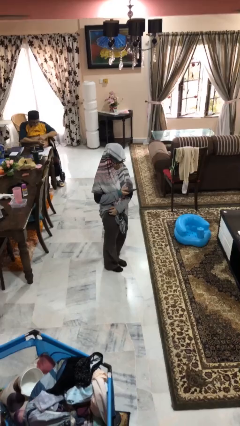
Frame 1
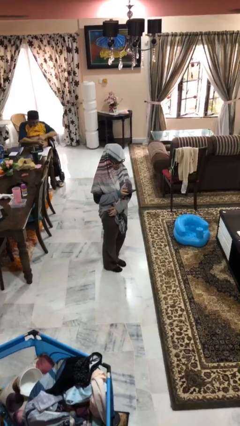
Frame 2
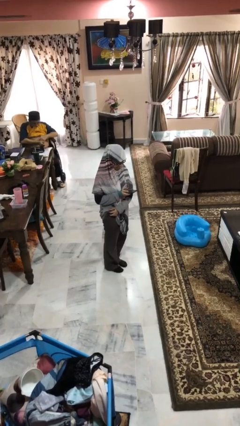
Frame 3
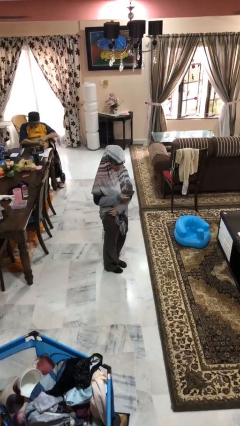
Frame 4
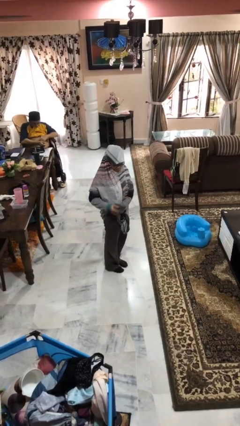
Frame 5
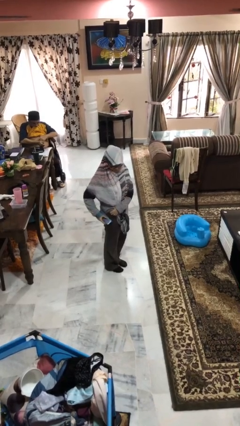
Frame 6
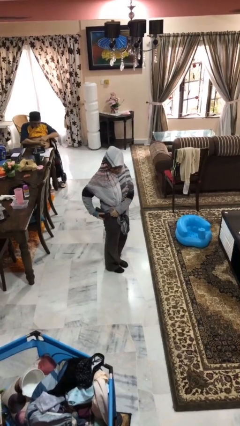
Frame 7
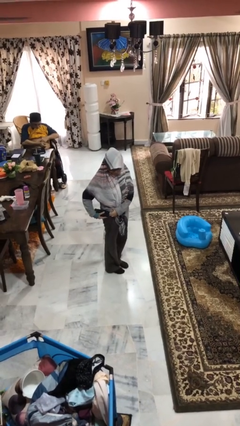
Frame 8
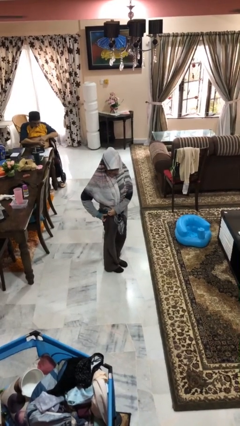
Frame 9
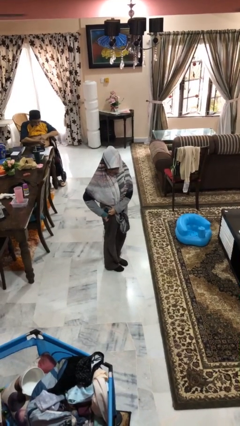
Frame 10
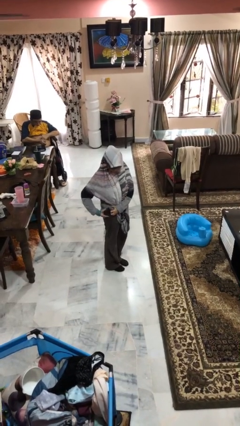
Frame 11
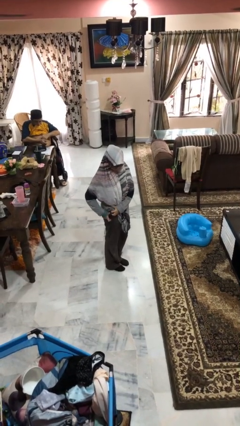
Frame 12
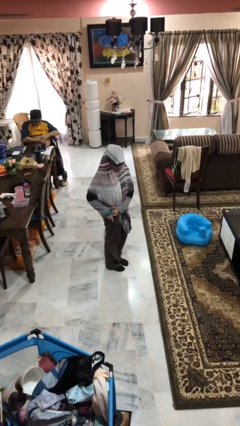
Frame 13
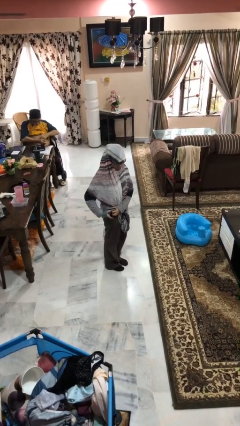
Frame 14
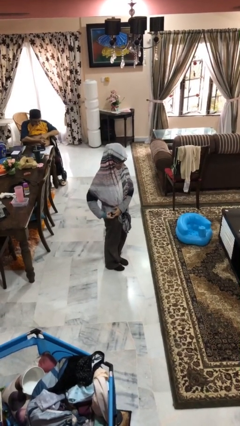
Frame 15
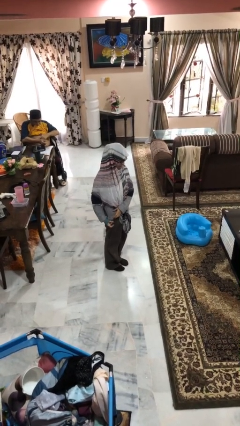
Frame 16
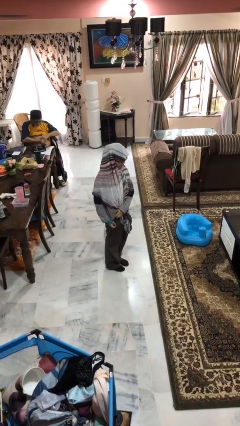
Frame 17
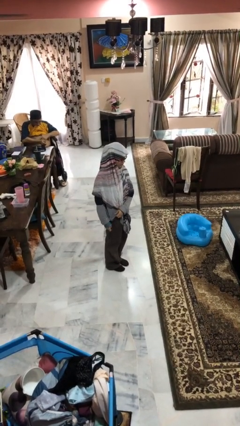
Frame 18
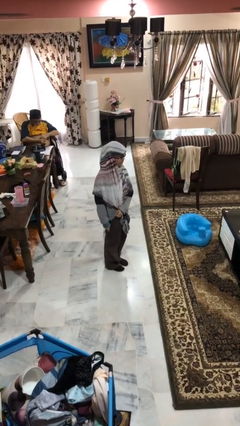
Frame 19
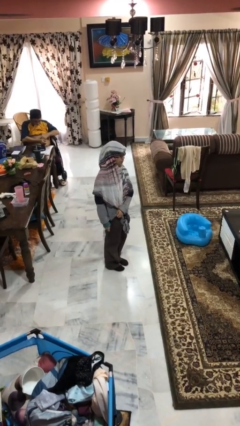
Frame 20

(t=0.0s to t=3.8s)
person puts phone into pocket

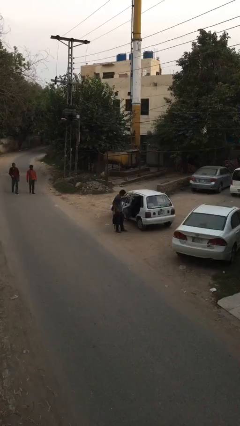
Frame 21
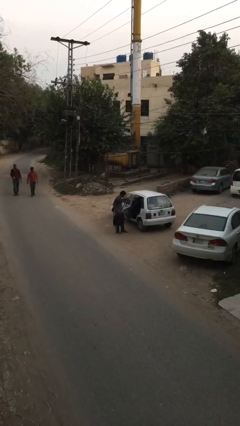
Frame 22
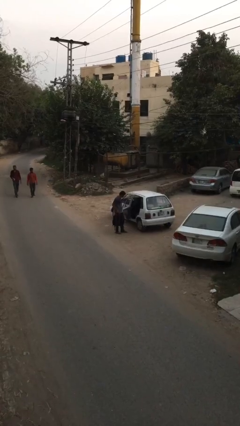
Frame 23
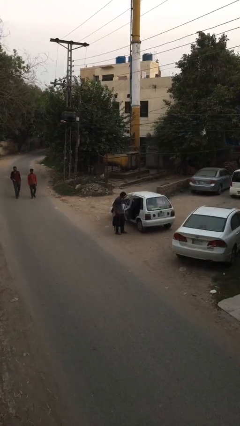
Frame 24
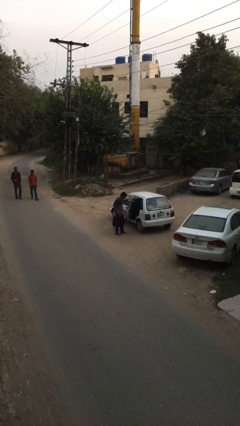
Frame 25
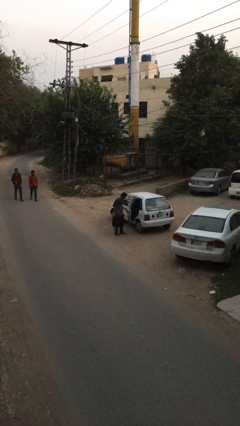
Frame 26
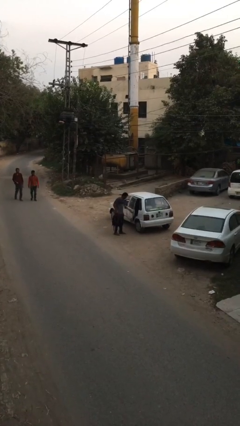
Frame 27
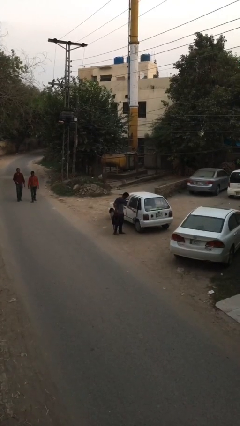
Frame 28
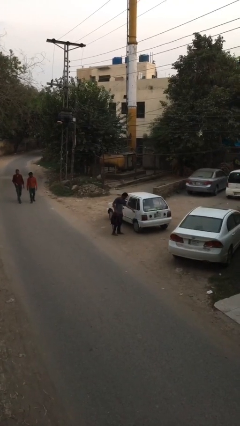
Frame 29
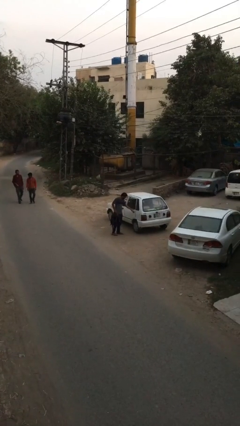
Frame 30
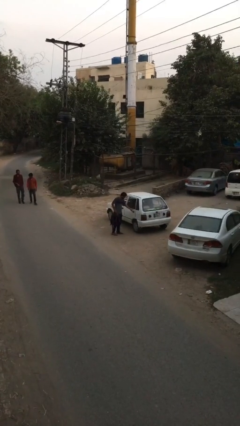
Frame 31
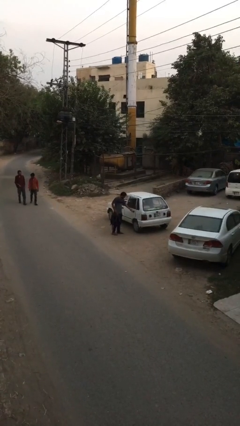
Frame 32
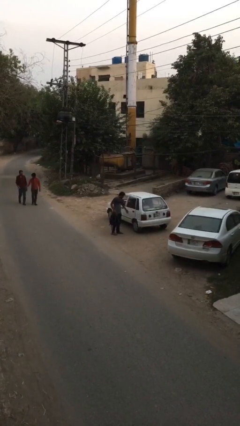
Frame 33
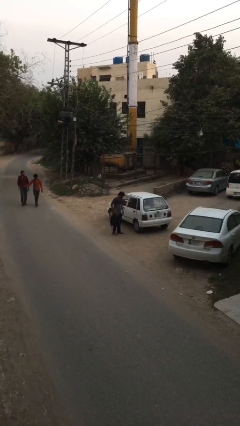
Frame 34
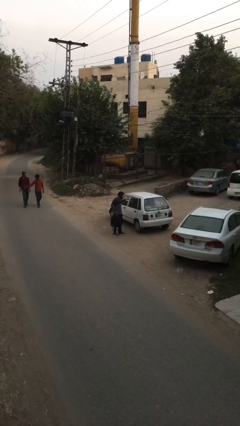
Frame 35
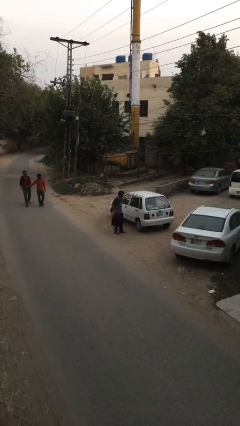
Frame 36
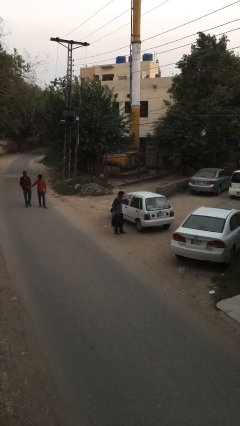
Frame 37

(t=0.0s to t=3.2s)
person closes car door

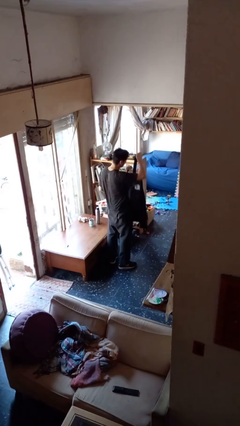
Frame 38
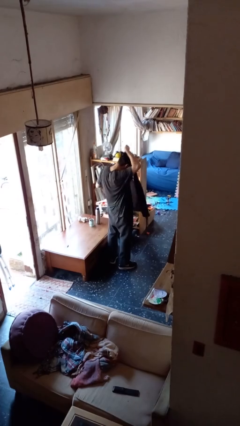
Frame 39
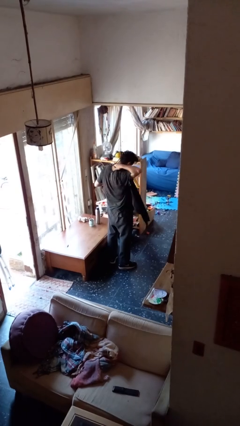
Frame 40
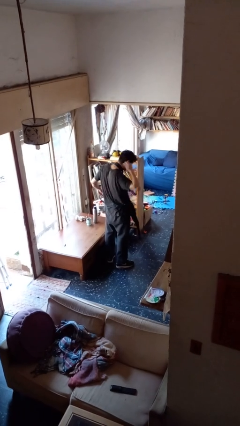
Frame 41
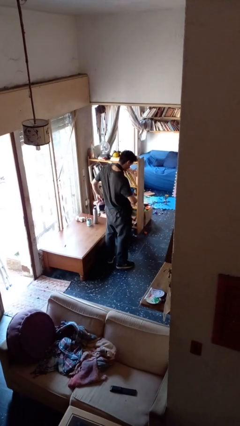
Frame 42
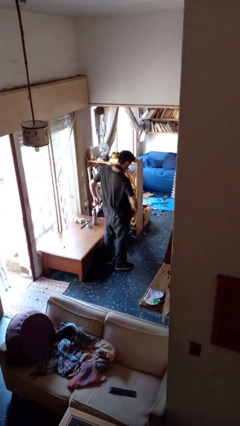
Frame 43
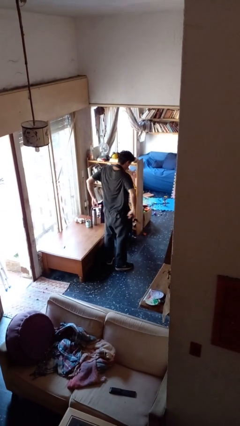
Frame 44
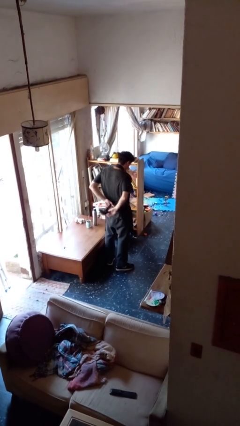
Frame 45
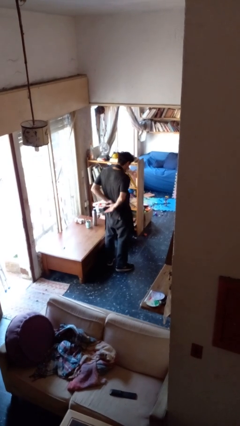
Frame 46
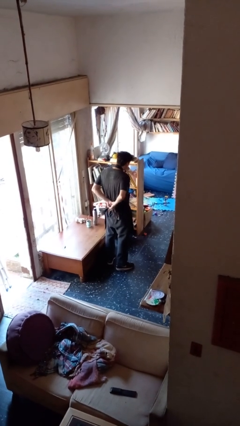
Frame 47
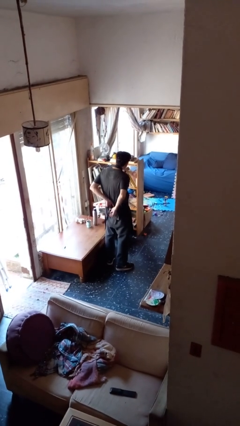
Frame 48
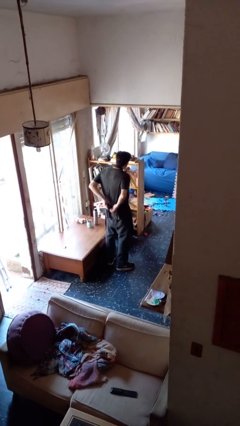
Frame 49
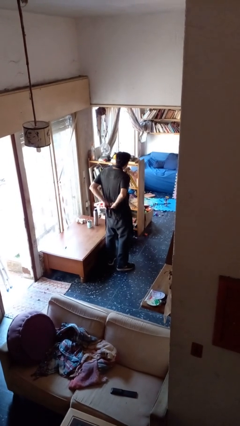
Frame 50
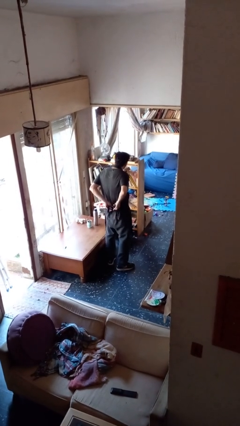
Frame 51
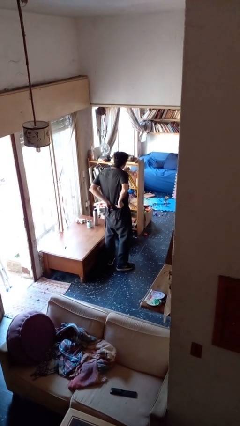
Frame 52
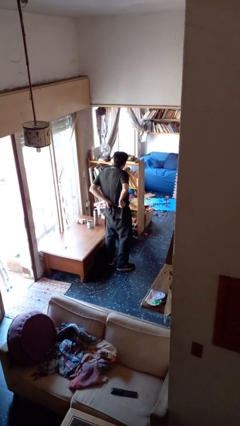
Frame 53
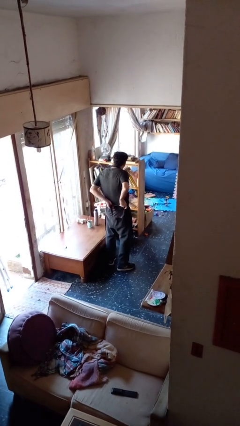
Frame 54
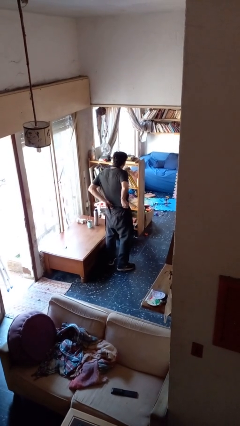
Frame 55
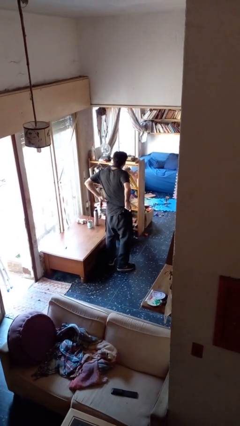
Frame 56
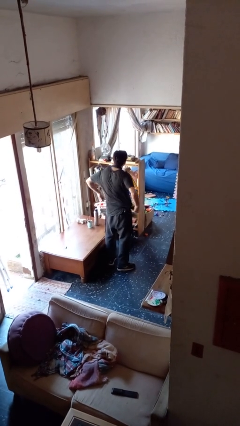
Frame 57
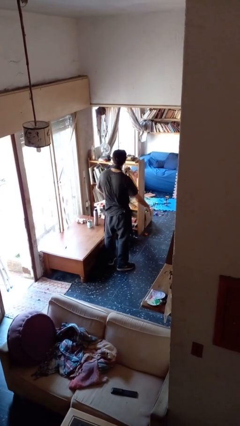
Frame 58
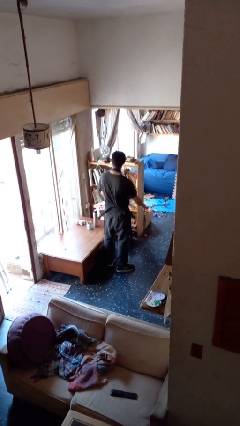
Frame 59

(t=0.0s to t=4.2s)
person puts on apron

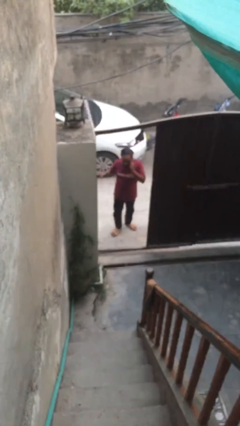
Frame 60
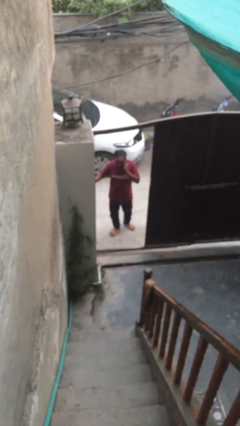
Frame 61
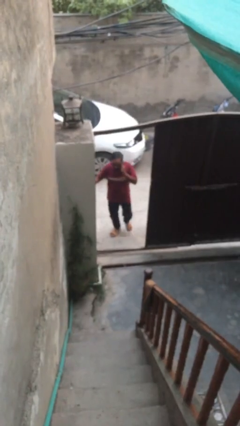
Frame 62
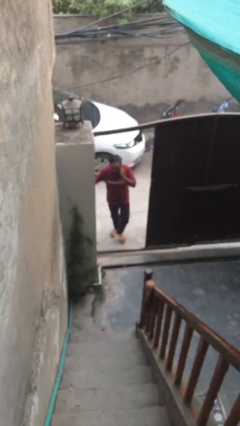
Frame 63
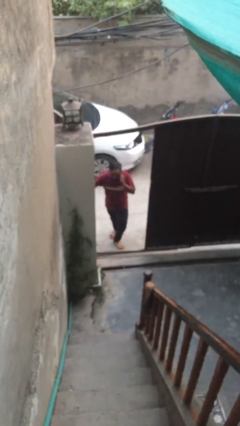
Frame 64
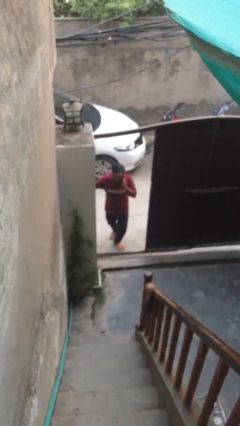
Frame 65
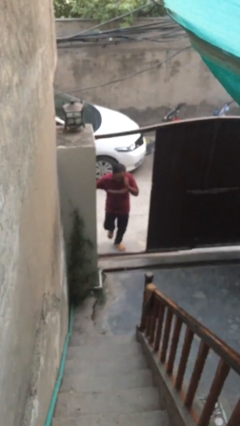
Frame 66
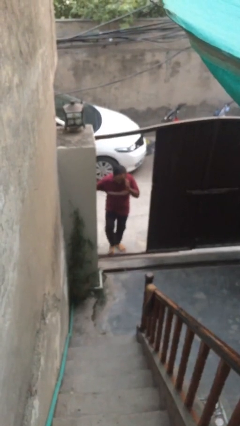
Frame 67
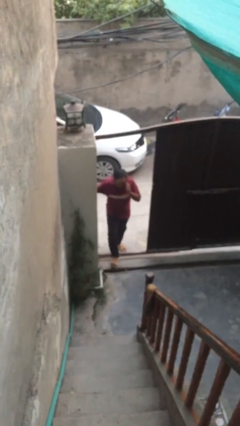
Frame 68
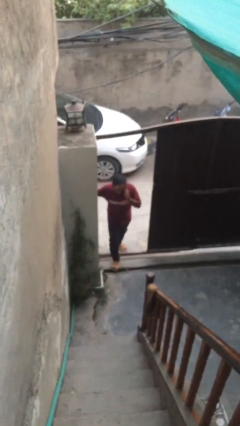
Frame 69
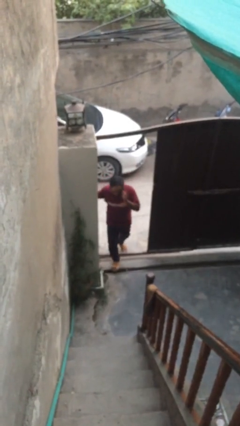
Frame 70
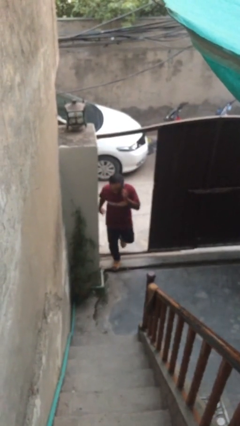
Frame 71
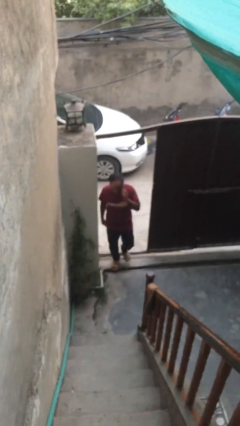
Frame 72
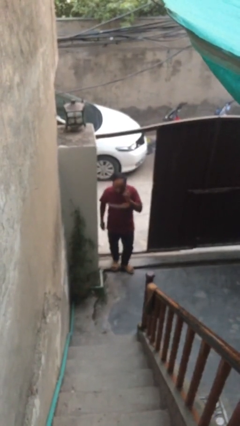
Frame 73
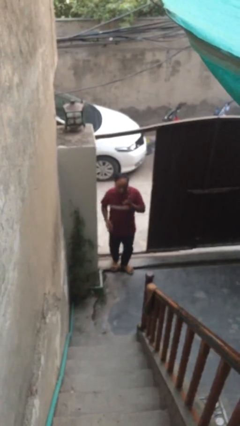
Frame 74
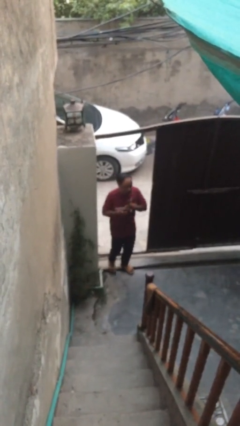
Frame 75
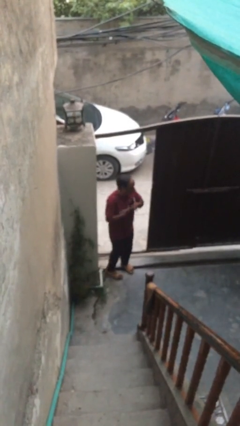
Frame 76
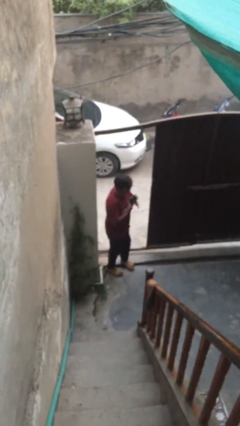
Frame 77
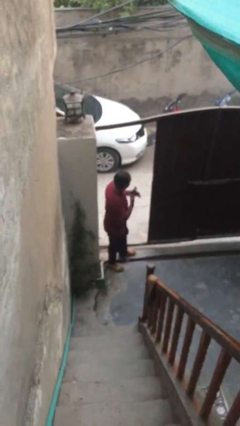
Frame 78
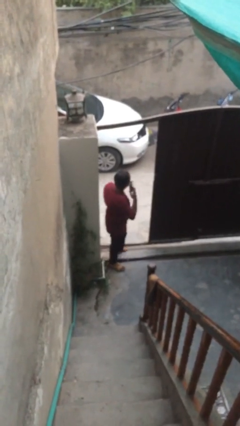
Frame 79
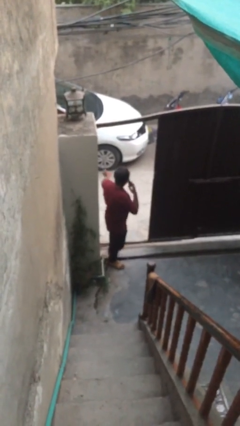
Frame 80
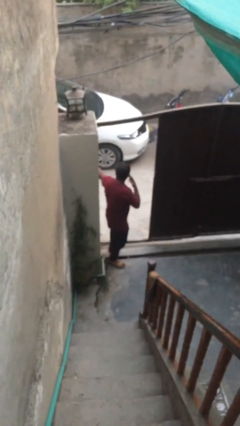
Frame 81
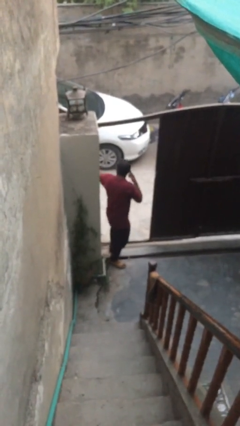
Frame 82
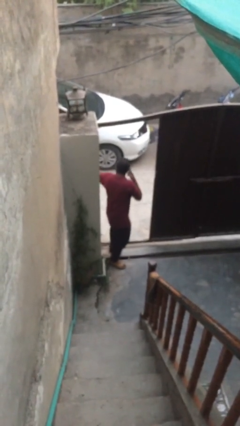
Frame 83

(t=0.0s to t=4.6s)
person enters scene through structure

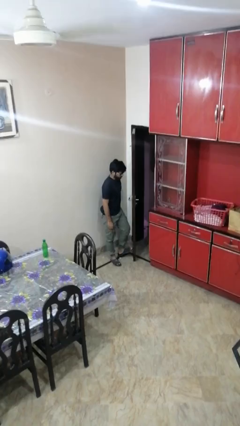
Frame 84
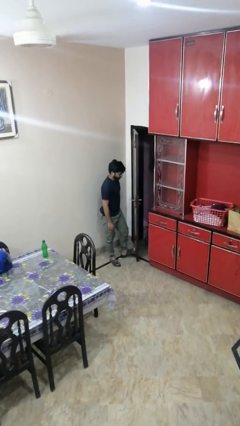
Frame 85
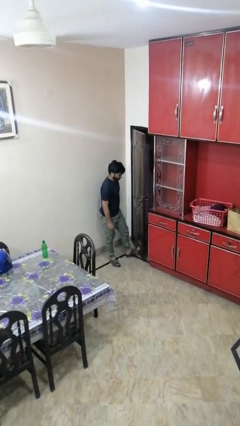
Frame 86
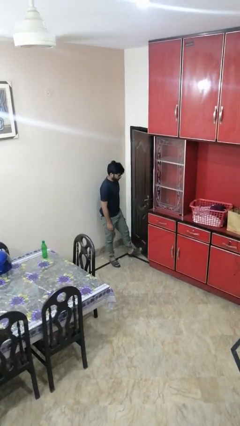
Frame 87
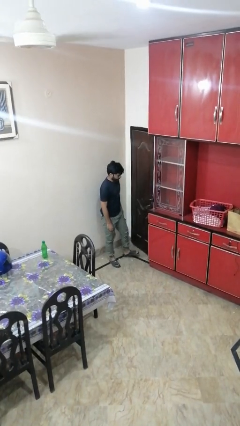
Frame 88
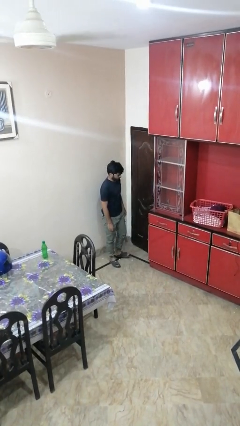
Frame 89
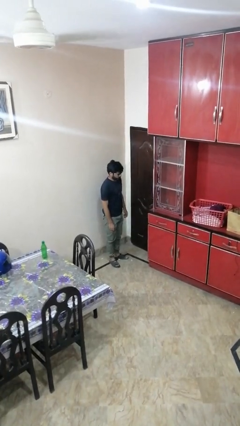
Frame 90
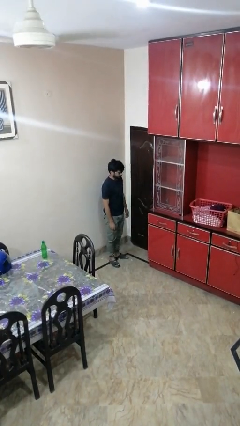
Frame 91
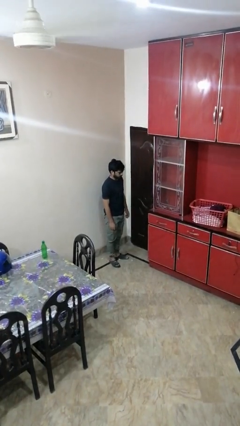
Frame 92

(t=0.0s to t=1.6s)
person closes door with foot

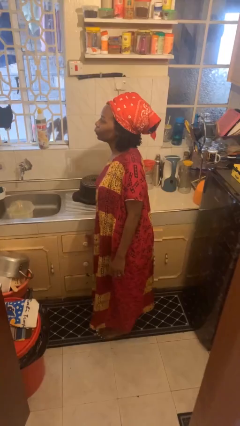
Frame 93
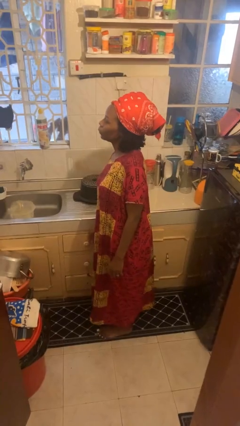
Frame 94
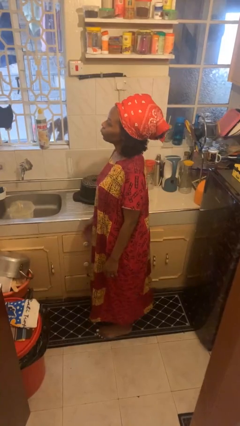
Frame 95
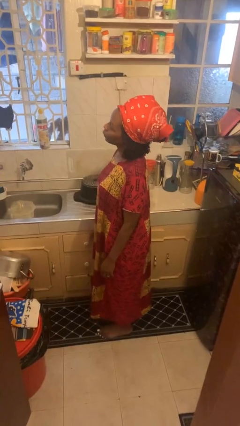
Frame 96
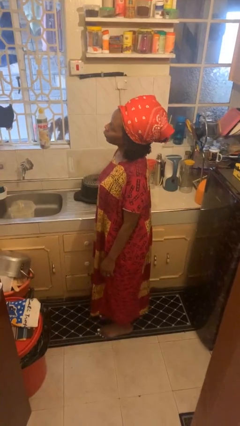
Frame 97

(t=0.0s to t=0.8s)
person closes kitchen drawer
